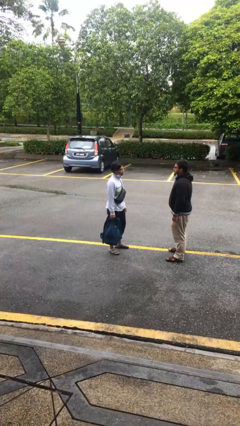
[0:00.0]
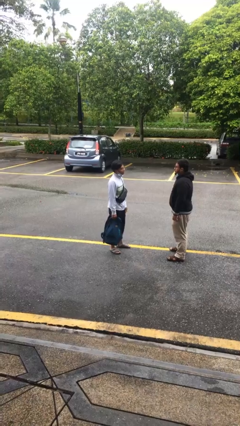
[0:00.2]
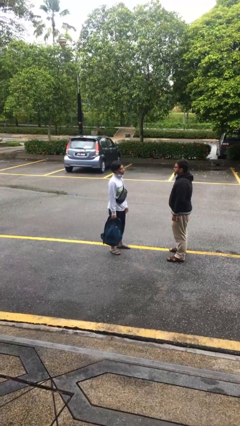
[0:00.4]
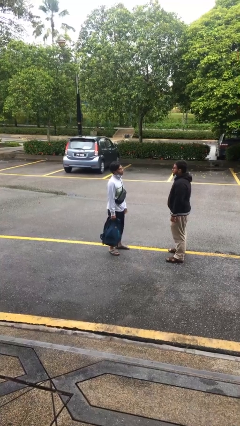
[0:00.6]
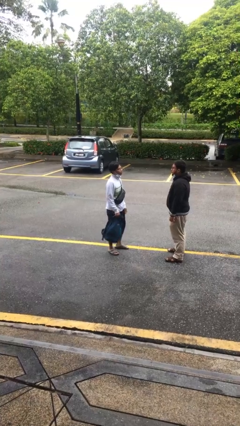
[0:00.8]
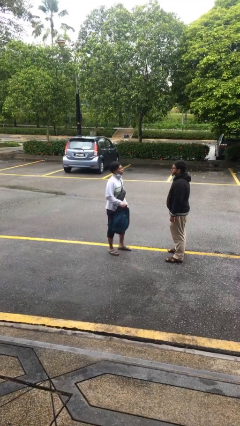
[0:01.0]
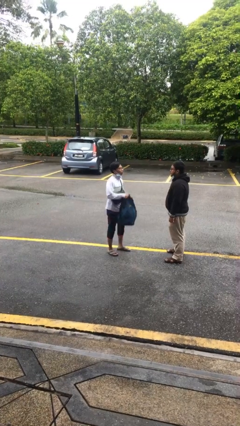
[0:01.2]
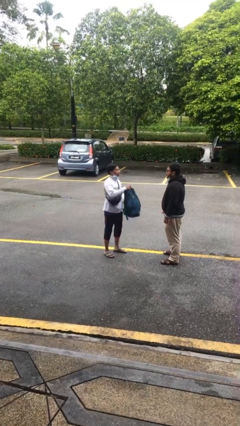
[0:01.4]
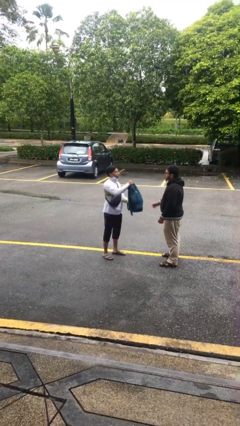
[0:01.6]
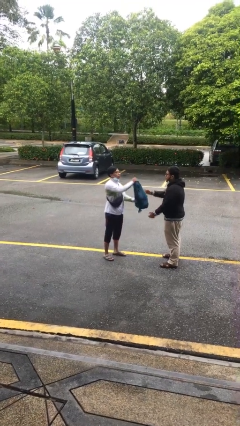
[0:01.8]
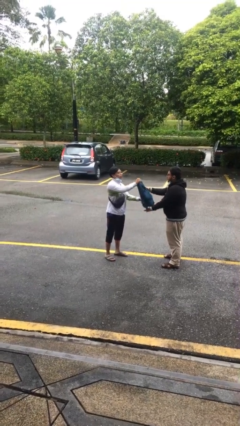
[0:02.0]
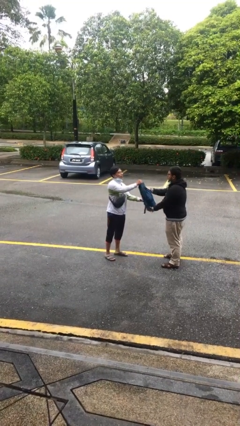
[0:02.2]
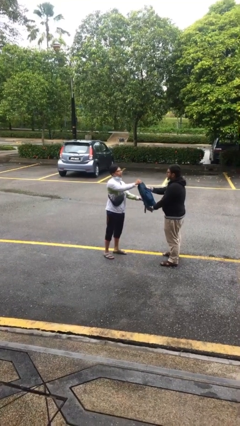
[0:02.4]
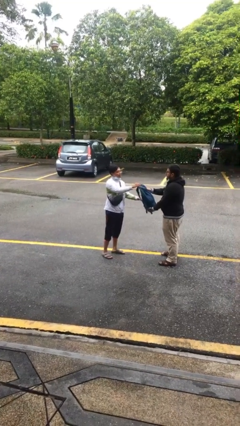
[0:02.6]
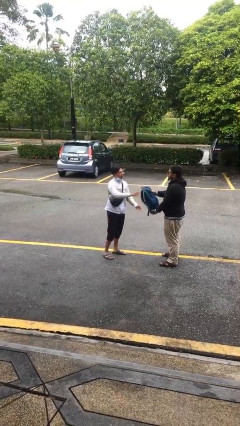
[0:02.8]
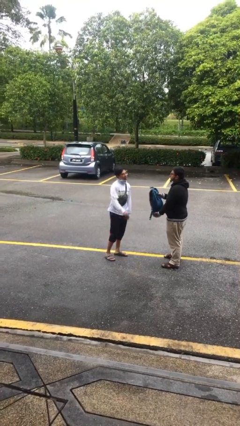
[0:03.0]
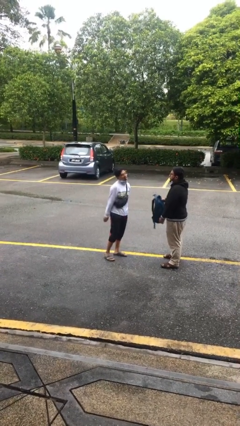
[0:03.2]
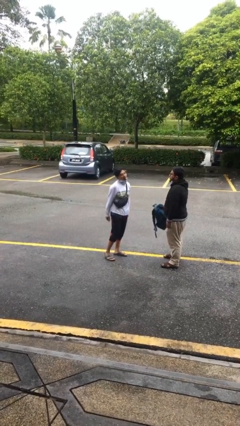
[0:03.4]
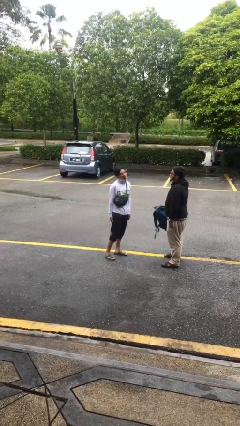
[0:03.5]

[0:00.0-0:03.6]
person transfers object to person

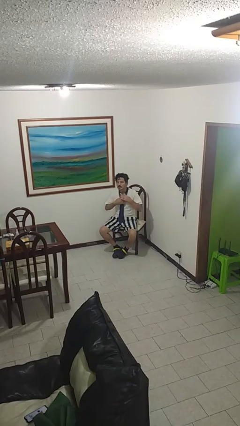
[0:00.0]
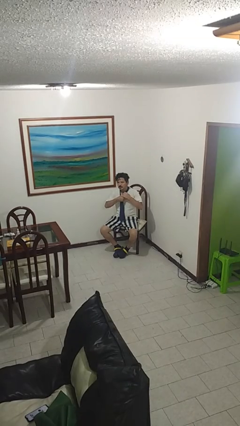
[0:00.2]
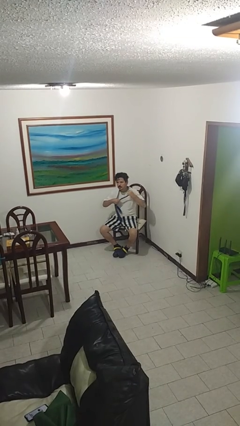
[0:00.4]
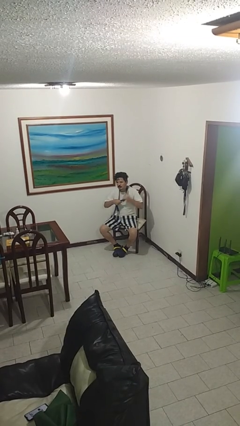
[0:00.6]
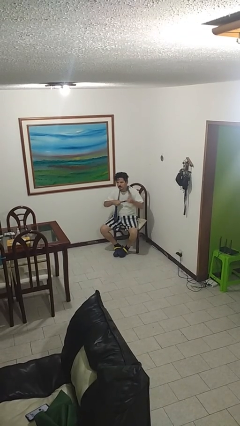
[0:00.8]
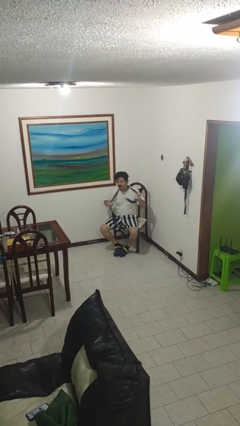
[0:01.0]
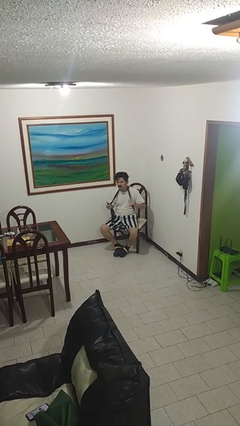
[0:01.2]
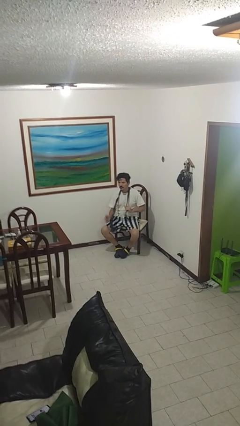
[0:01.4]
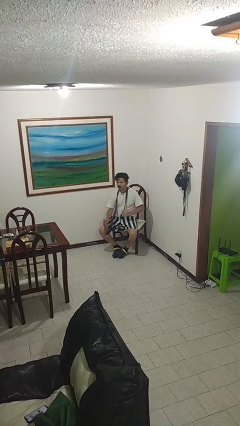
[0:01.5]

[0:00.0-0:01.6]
person takes off necktie

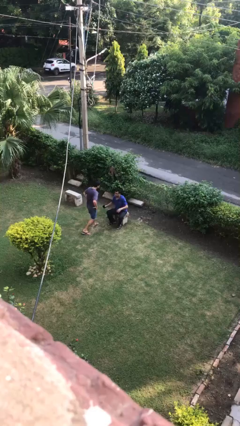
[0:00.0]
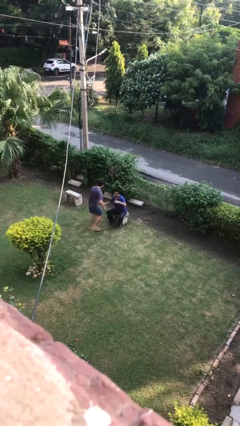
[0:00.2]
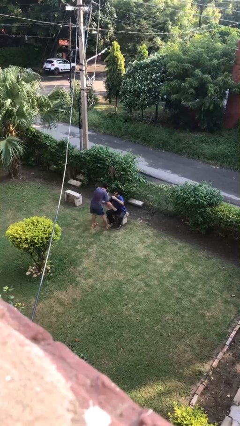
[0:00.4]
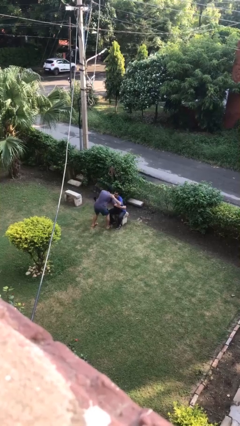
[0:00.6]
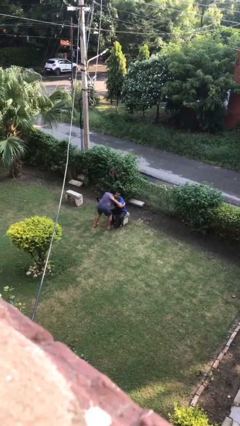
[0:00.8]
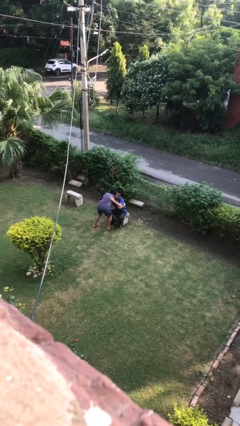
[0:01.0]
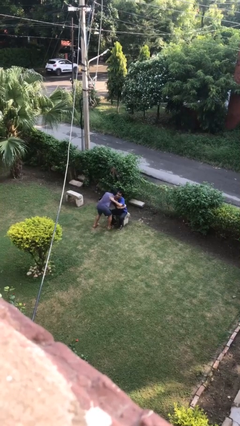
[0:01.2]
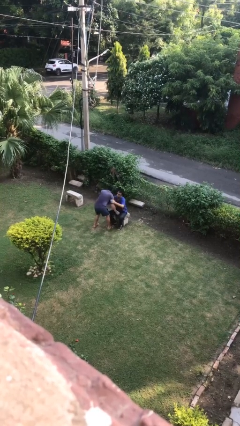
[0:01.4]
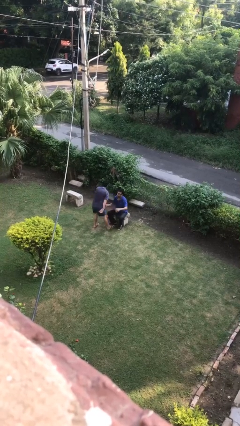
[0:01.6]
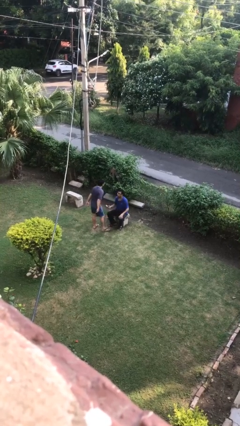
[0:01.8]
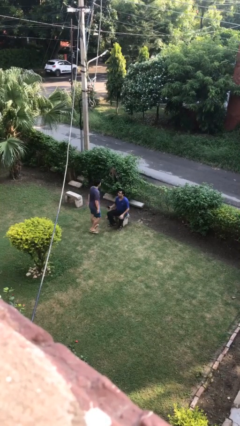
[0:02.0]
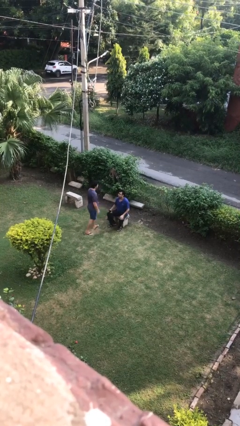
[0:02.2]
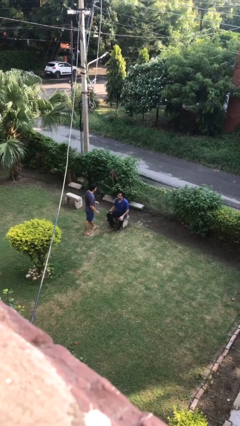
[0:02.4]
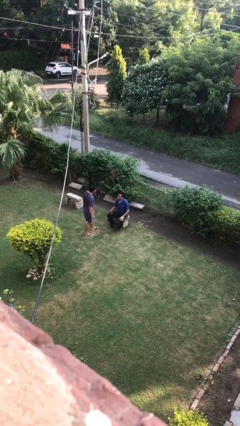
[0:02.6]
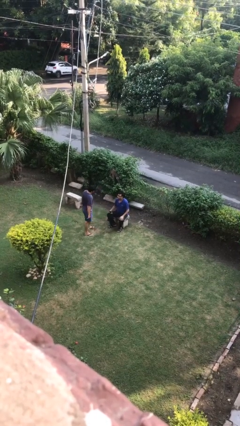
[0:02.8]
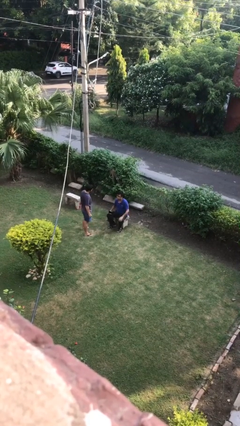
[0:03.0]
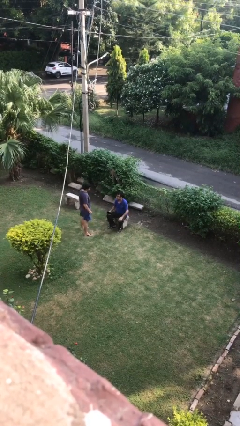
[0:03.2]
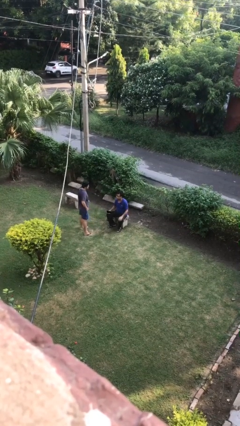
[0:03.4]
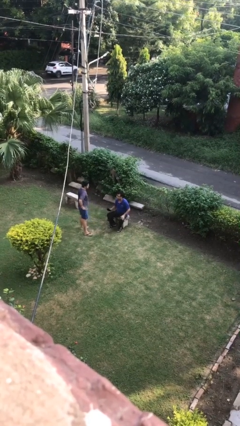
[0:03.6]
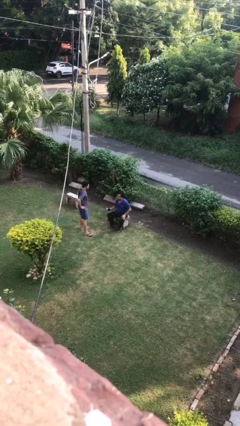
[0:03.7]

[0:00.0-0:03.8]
person embraces person

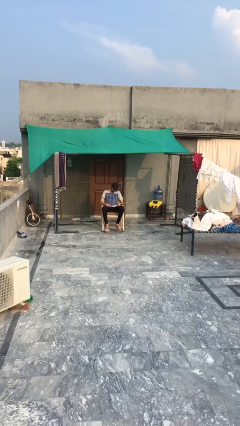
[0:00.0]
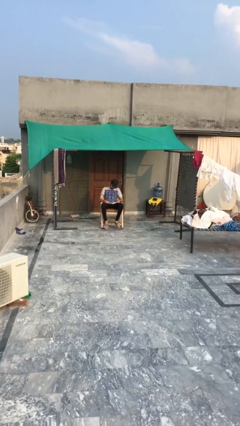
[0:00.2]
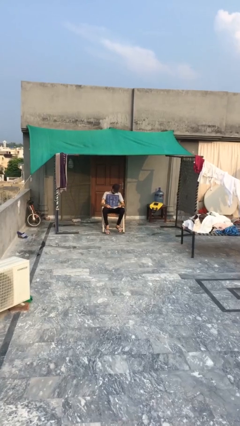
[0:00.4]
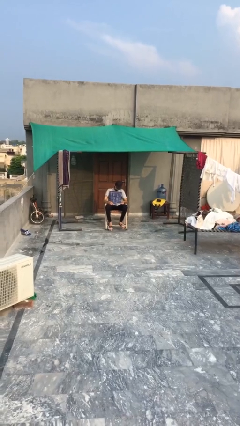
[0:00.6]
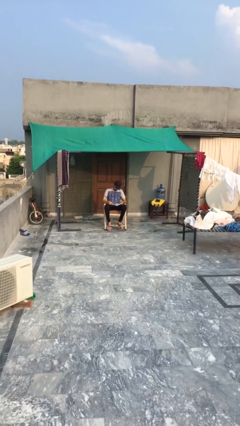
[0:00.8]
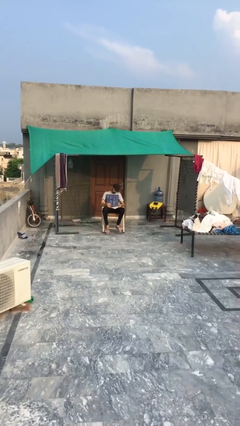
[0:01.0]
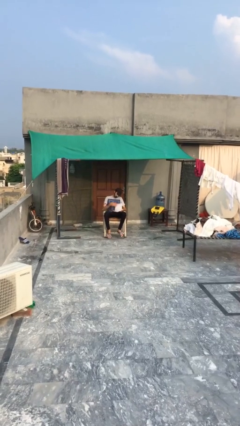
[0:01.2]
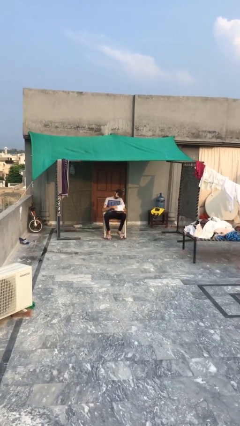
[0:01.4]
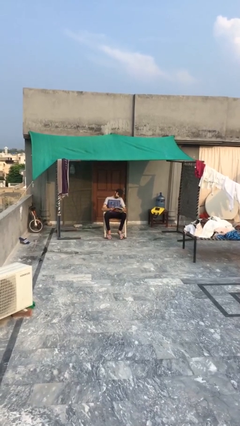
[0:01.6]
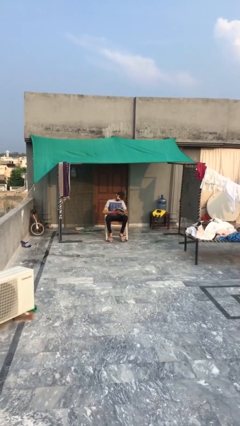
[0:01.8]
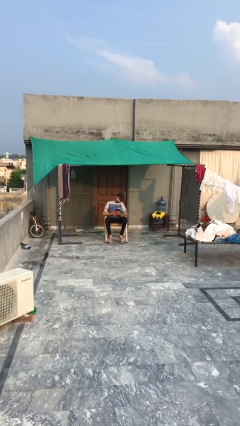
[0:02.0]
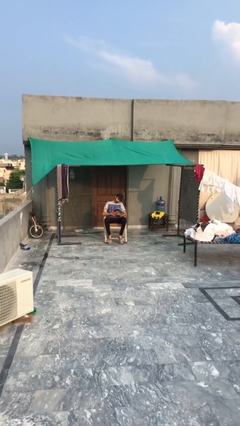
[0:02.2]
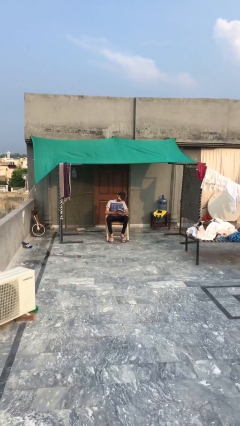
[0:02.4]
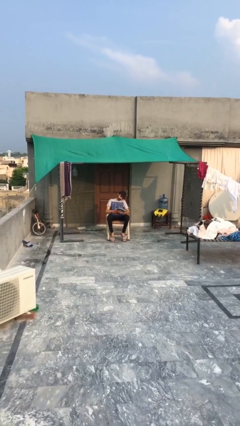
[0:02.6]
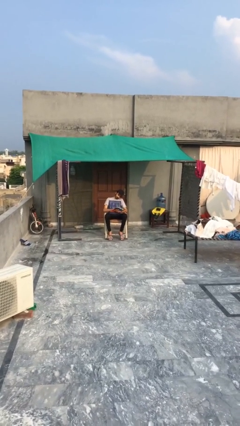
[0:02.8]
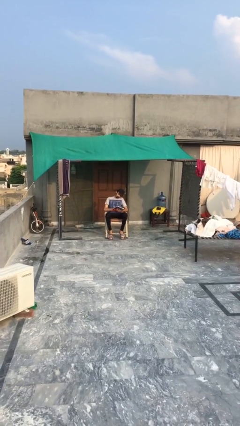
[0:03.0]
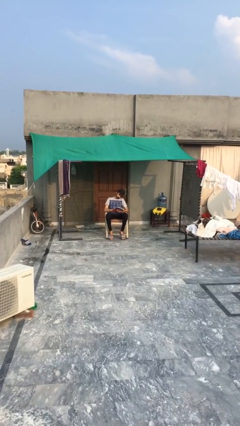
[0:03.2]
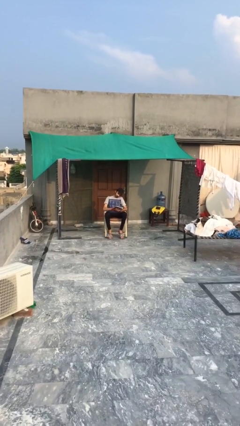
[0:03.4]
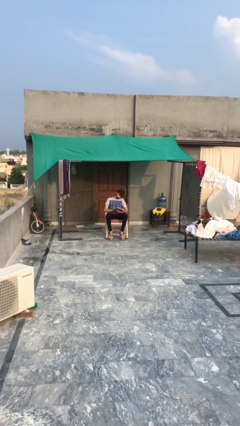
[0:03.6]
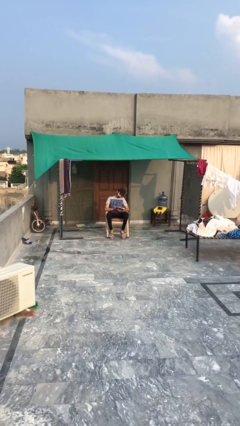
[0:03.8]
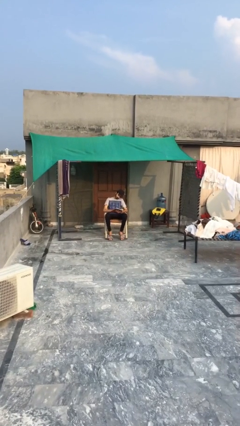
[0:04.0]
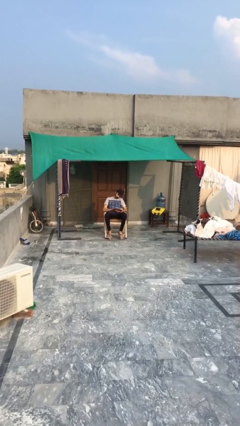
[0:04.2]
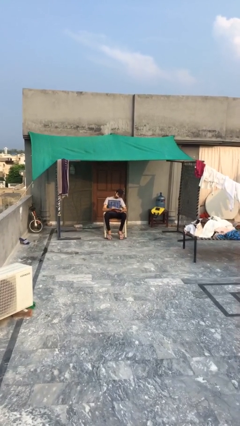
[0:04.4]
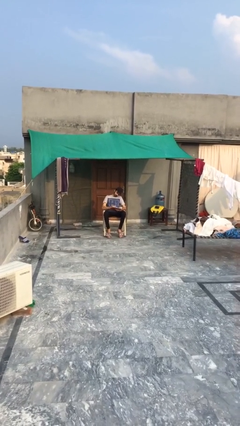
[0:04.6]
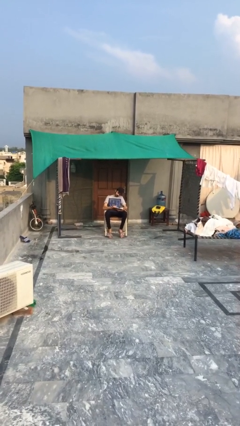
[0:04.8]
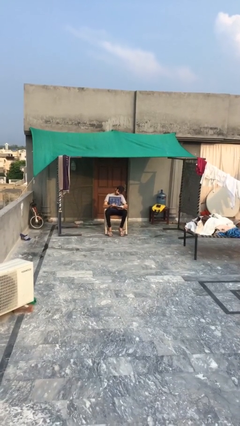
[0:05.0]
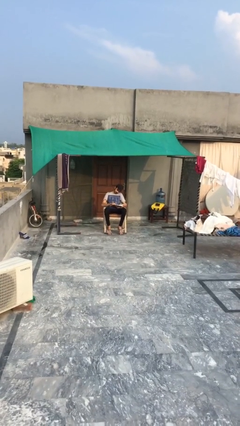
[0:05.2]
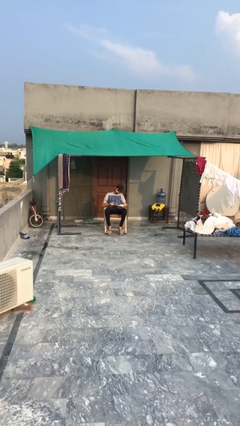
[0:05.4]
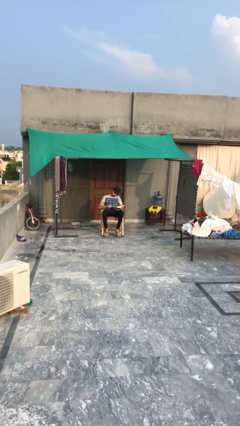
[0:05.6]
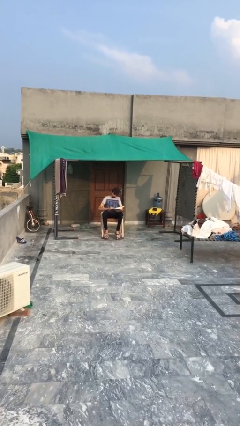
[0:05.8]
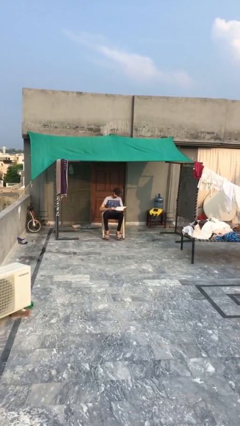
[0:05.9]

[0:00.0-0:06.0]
person reads document

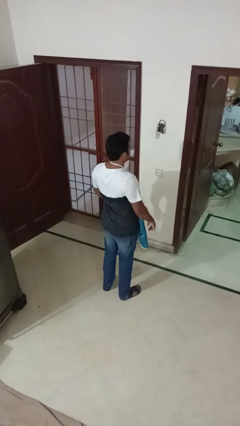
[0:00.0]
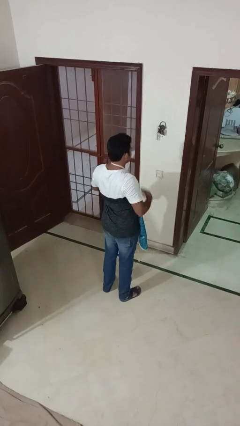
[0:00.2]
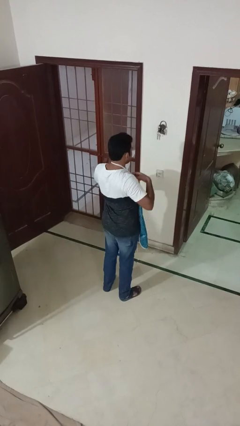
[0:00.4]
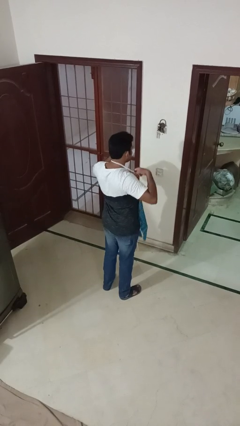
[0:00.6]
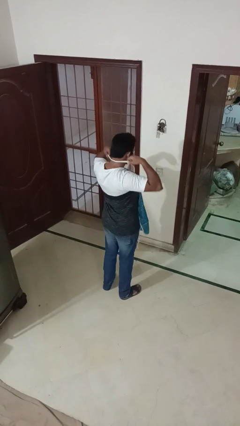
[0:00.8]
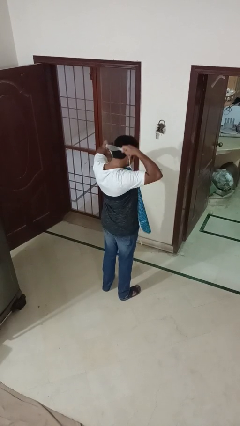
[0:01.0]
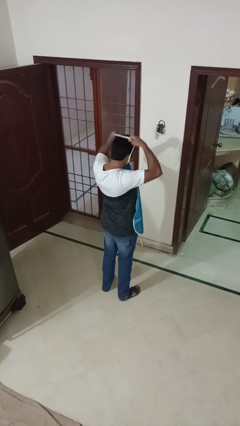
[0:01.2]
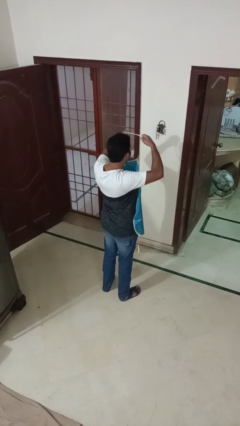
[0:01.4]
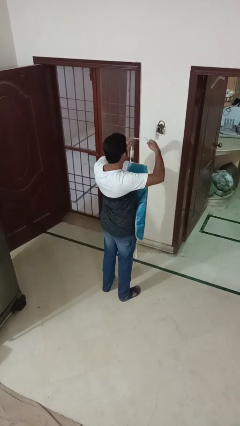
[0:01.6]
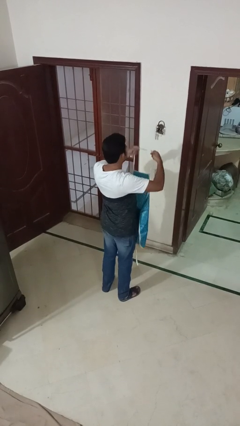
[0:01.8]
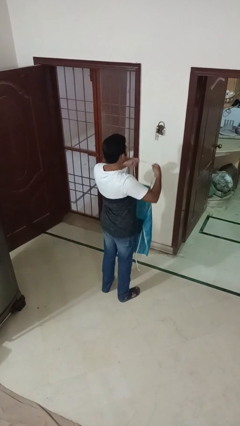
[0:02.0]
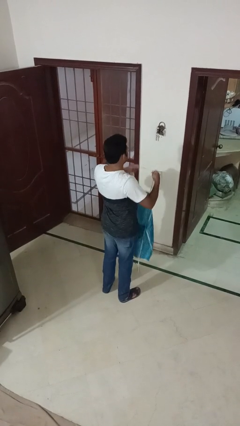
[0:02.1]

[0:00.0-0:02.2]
person takes off apron
